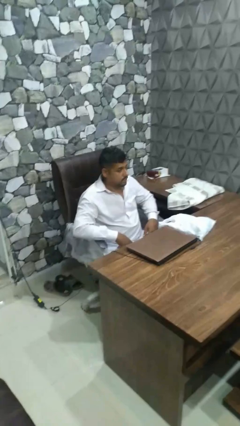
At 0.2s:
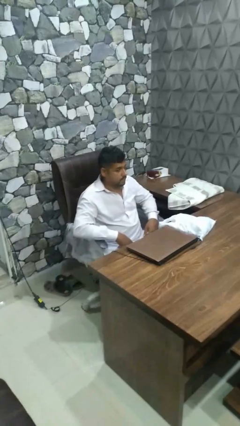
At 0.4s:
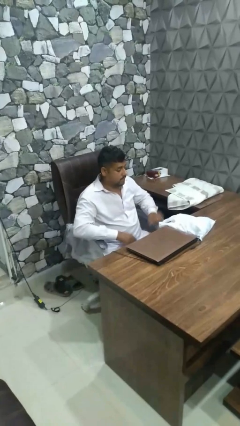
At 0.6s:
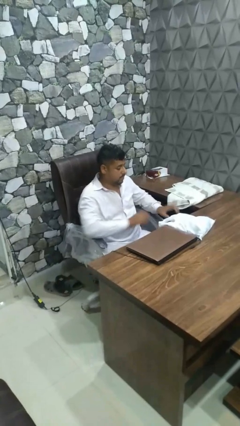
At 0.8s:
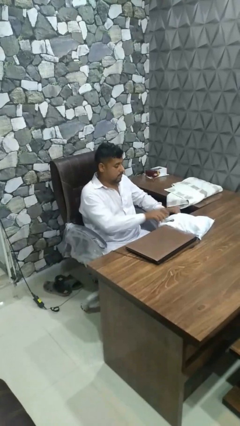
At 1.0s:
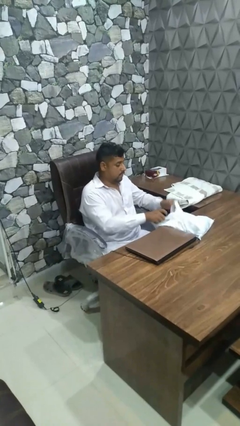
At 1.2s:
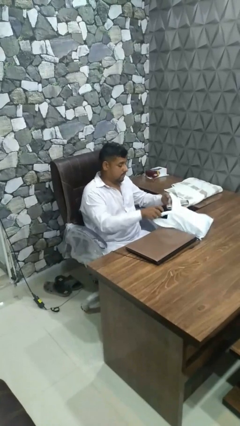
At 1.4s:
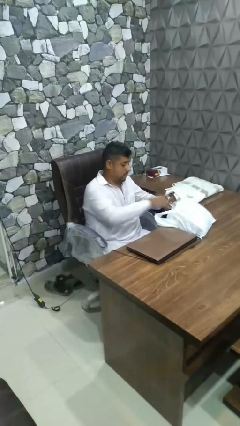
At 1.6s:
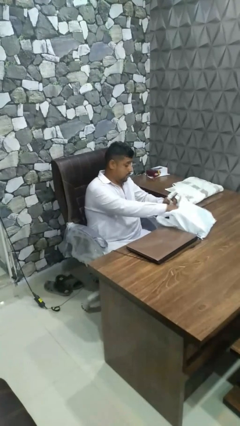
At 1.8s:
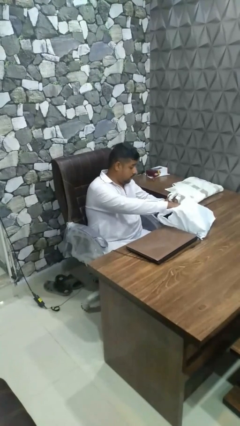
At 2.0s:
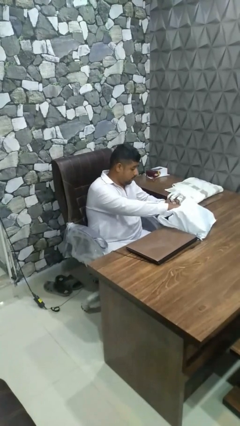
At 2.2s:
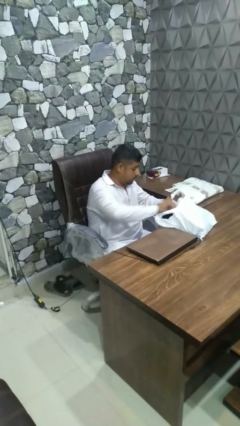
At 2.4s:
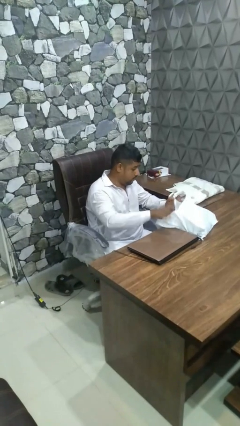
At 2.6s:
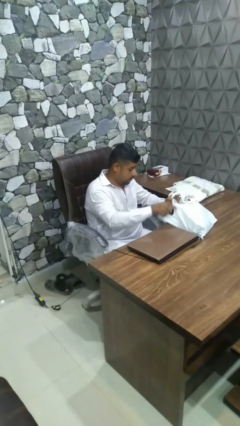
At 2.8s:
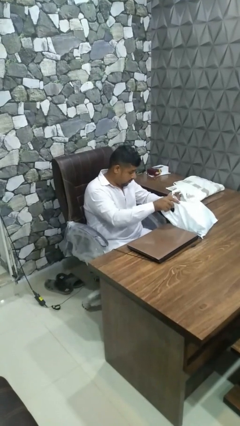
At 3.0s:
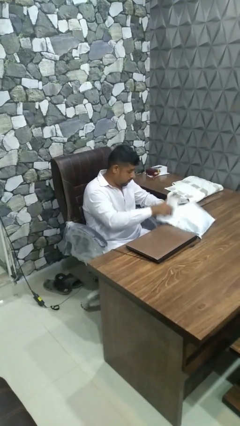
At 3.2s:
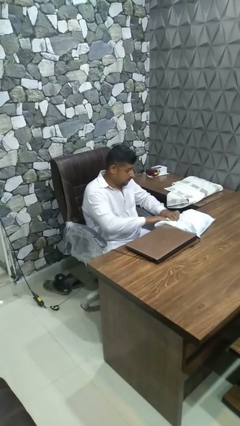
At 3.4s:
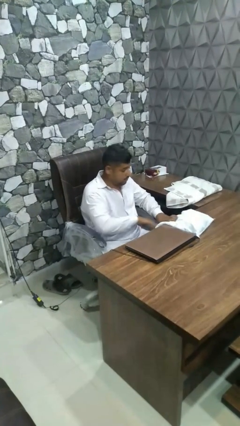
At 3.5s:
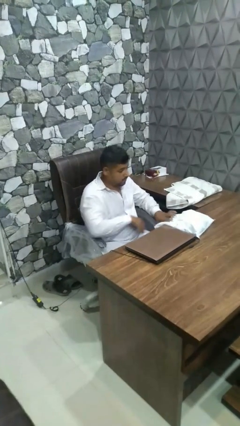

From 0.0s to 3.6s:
person searches in bag

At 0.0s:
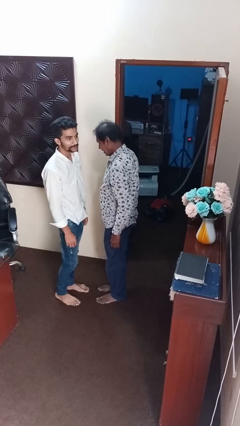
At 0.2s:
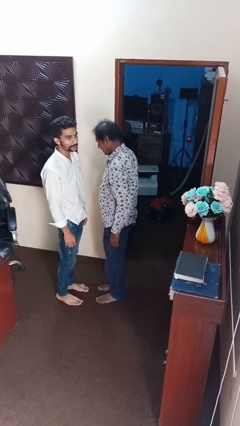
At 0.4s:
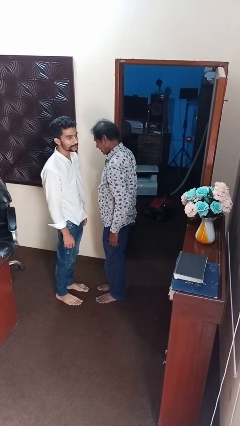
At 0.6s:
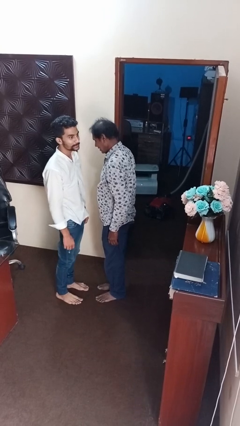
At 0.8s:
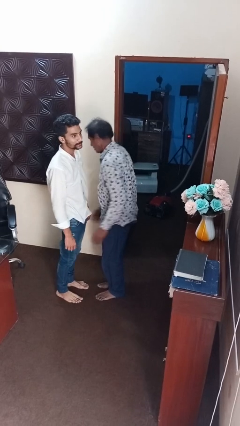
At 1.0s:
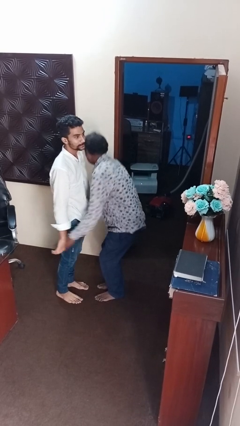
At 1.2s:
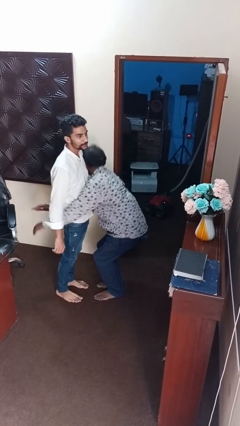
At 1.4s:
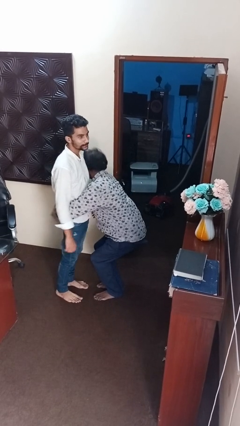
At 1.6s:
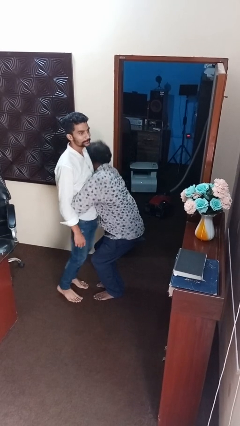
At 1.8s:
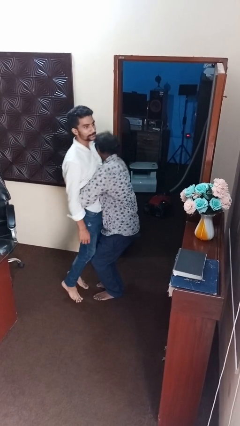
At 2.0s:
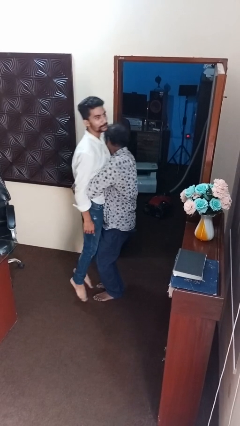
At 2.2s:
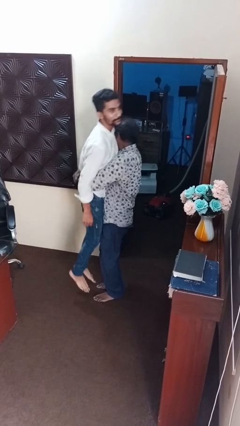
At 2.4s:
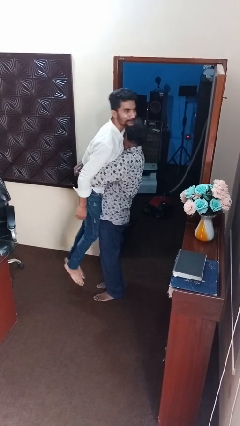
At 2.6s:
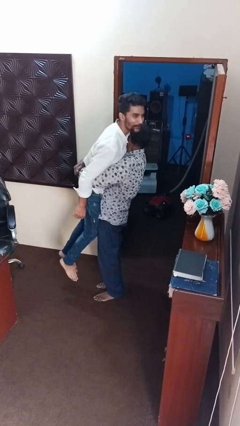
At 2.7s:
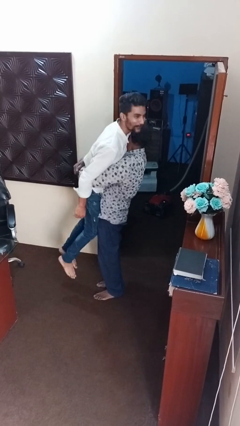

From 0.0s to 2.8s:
person picks up person

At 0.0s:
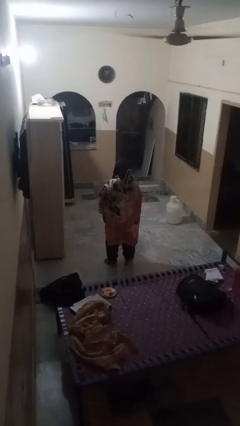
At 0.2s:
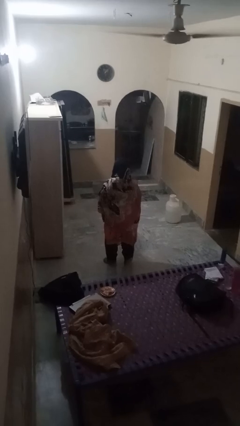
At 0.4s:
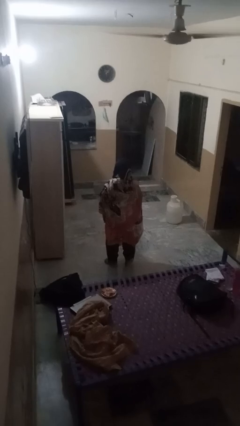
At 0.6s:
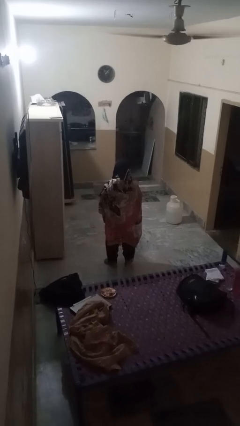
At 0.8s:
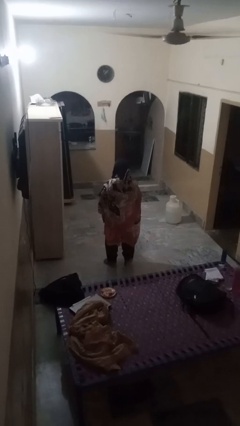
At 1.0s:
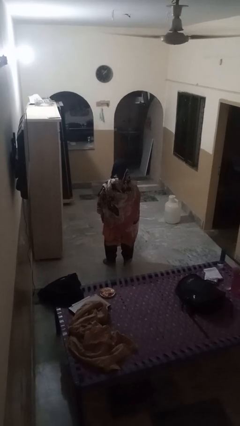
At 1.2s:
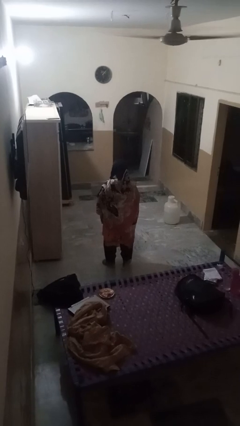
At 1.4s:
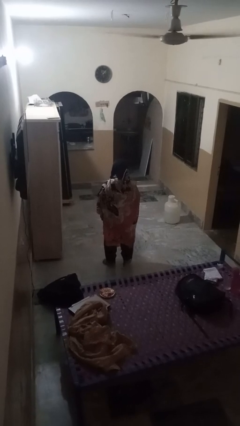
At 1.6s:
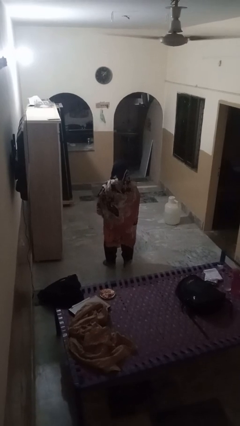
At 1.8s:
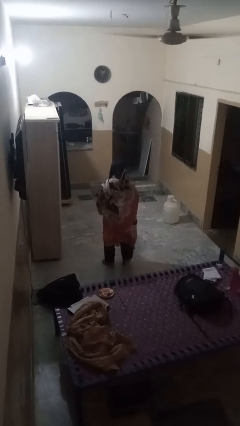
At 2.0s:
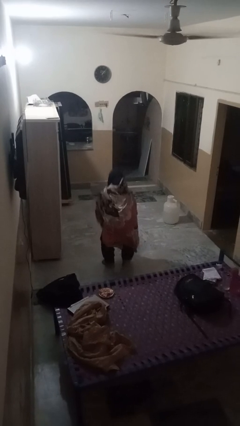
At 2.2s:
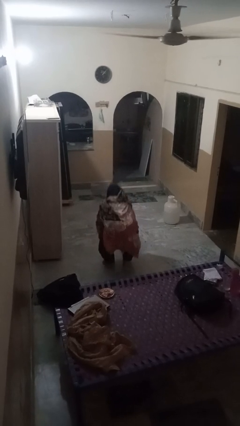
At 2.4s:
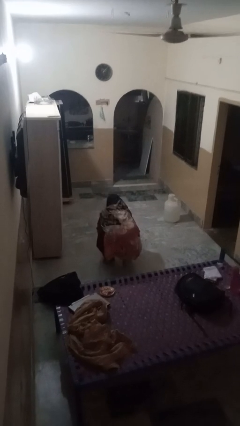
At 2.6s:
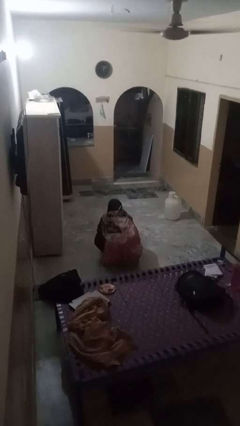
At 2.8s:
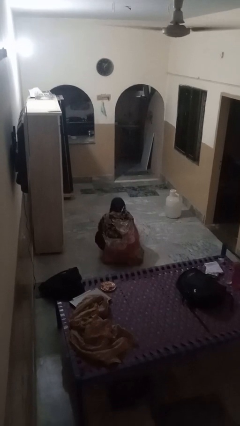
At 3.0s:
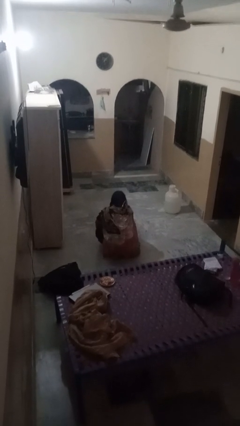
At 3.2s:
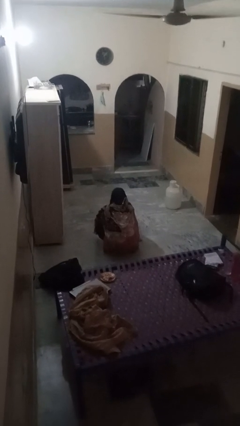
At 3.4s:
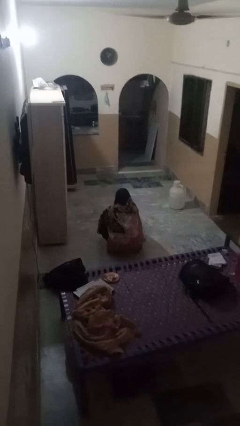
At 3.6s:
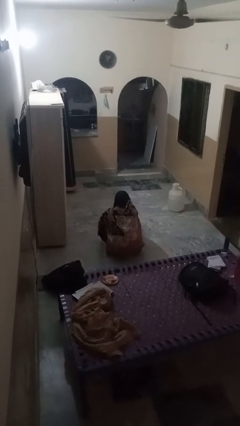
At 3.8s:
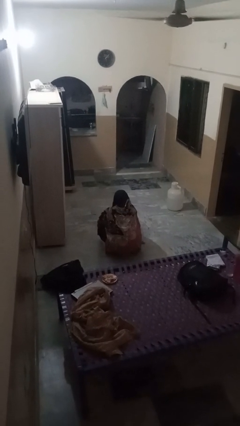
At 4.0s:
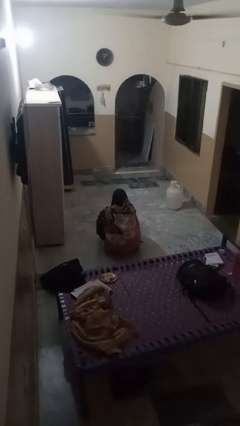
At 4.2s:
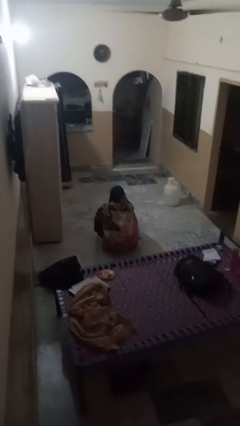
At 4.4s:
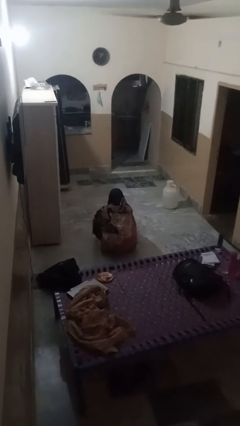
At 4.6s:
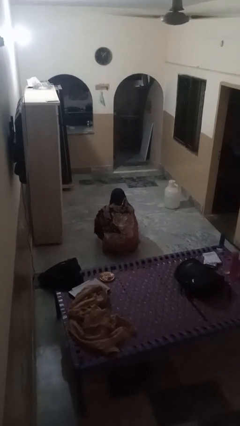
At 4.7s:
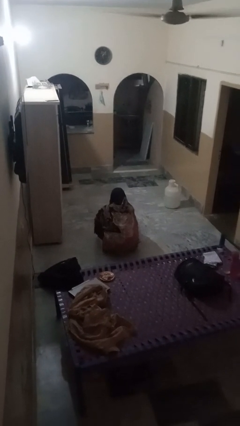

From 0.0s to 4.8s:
person squats

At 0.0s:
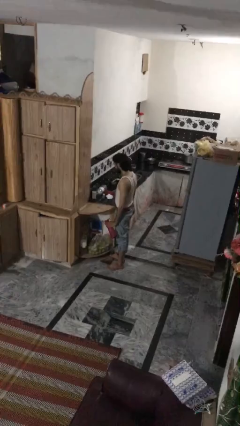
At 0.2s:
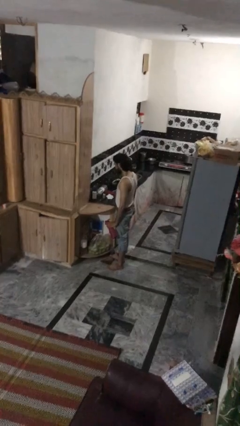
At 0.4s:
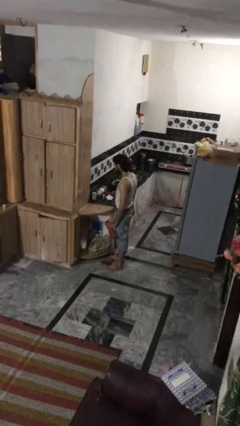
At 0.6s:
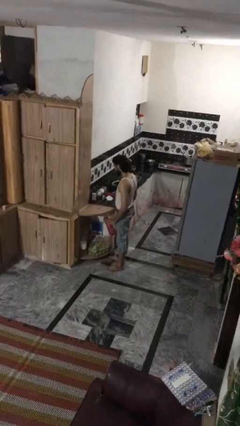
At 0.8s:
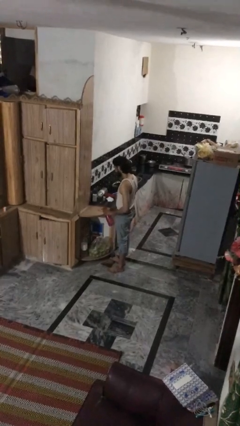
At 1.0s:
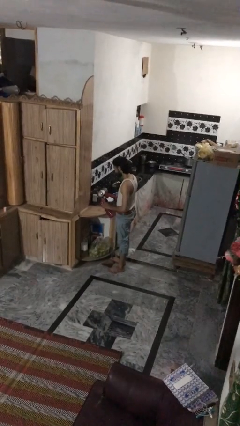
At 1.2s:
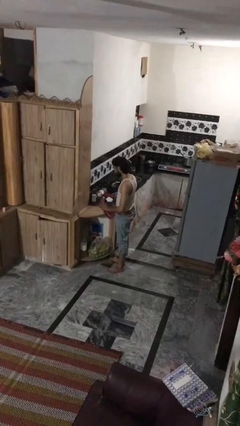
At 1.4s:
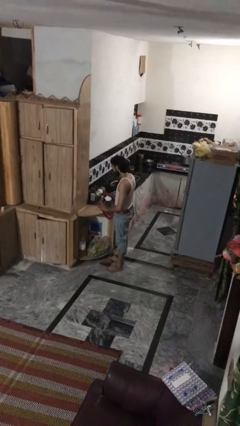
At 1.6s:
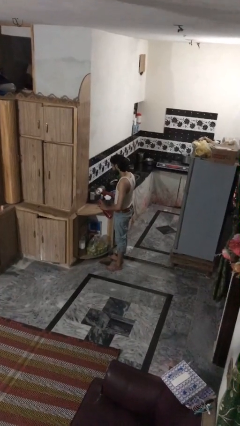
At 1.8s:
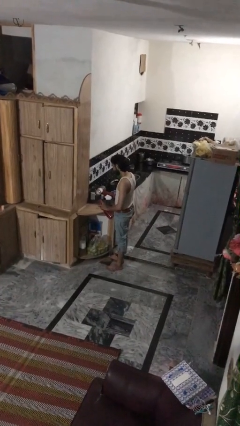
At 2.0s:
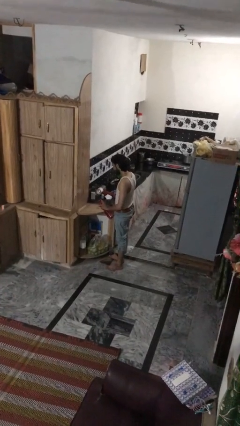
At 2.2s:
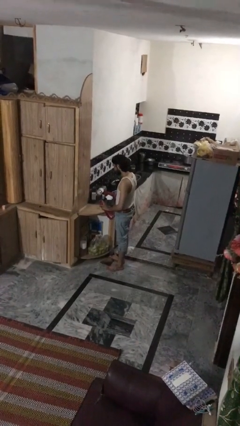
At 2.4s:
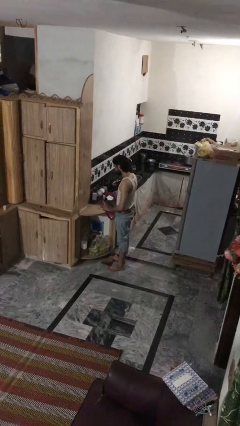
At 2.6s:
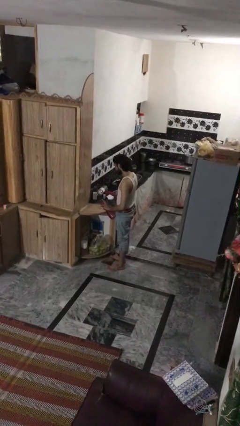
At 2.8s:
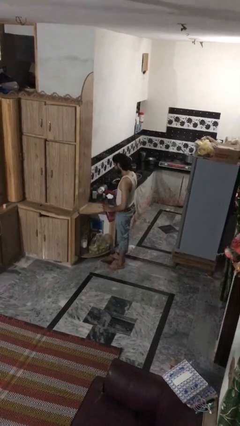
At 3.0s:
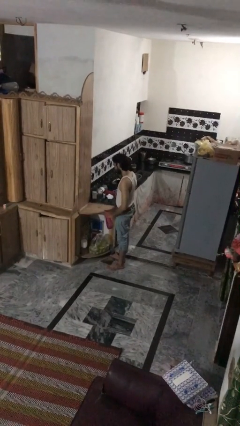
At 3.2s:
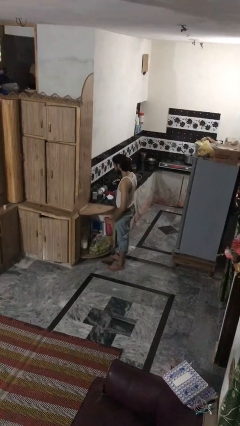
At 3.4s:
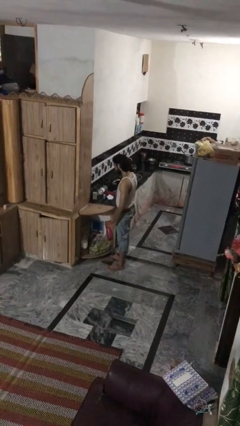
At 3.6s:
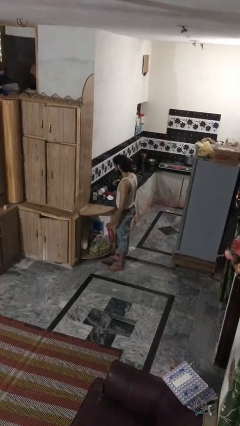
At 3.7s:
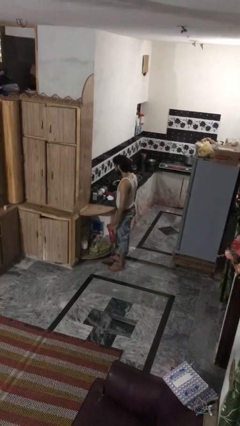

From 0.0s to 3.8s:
person sprays from bottle

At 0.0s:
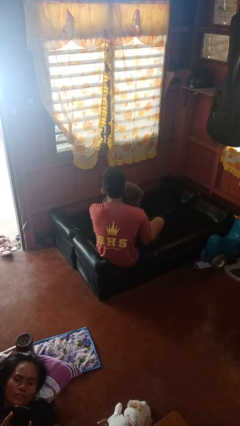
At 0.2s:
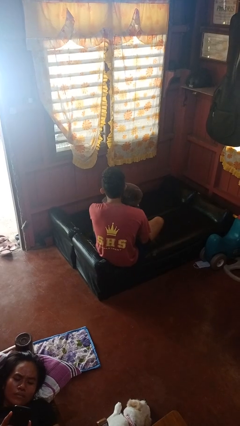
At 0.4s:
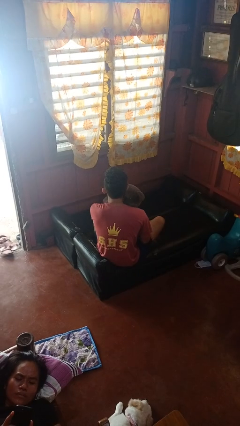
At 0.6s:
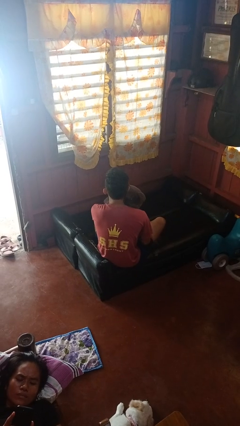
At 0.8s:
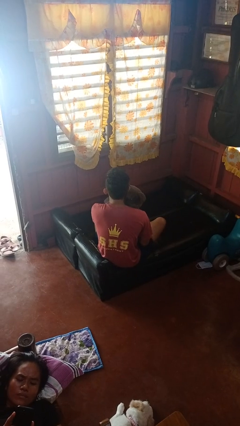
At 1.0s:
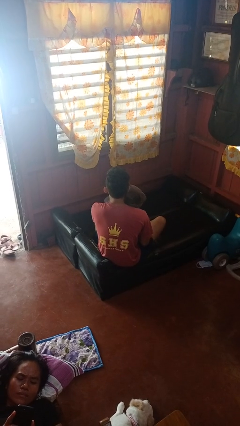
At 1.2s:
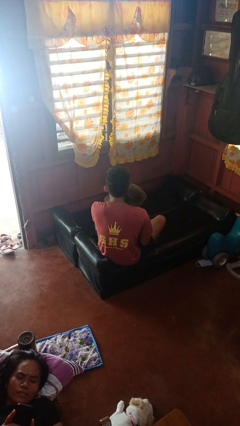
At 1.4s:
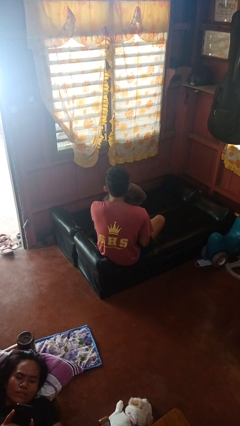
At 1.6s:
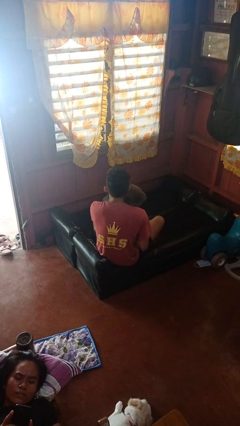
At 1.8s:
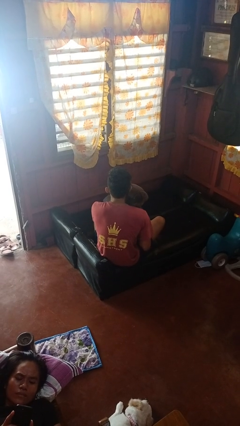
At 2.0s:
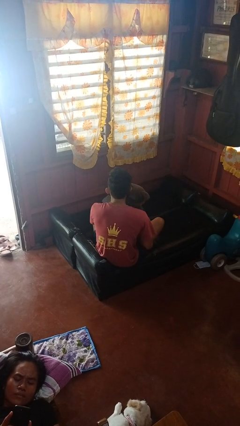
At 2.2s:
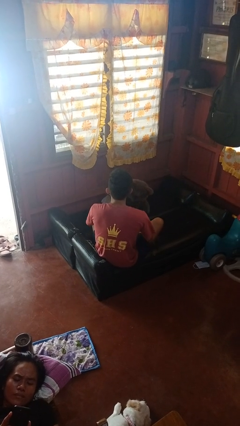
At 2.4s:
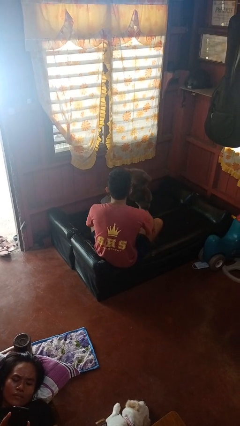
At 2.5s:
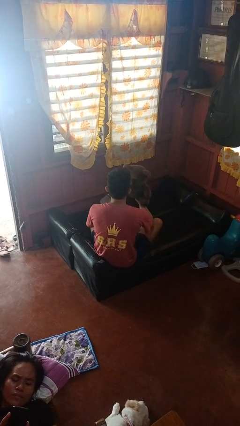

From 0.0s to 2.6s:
person hugs stuffed animal

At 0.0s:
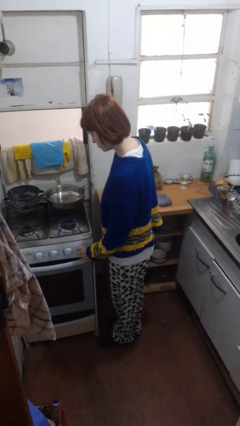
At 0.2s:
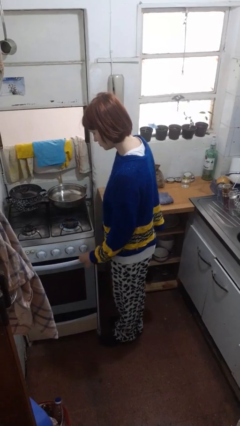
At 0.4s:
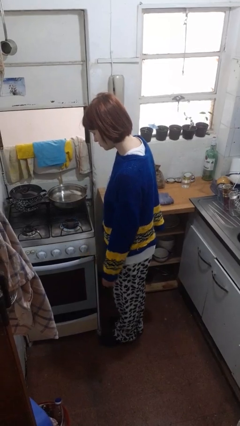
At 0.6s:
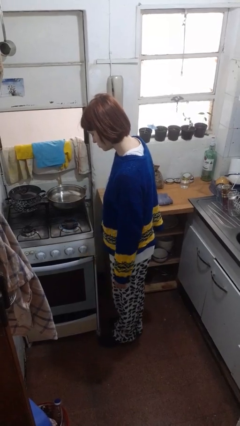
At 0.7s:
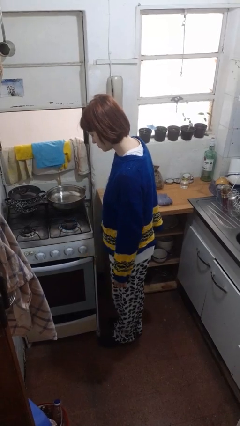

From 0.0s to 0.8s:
person turns off stovetop
